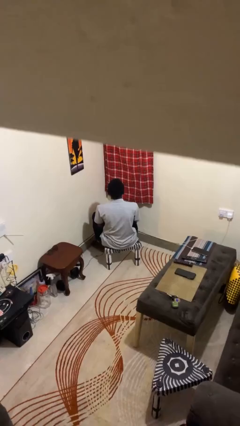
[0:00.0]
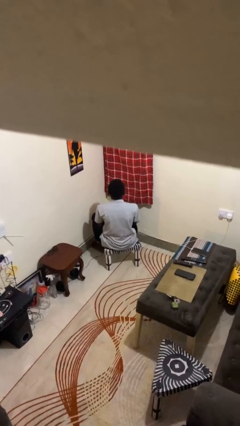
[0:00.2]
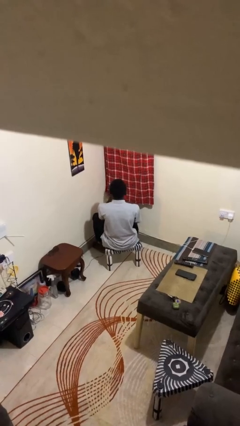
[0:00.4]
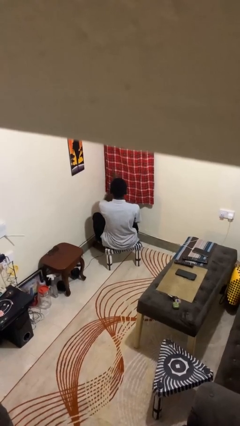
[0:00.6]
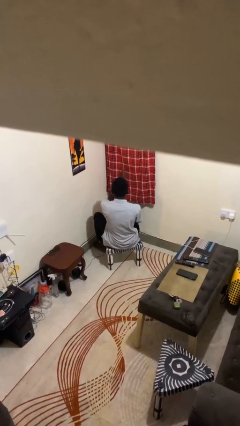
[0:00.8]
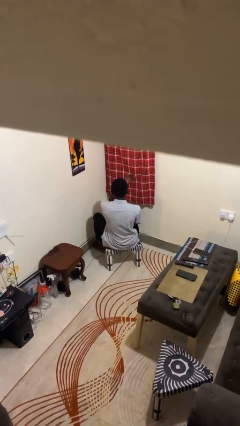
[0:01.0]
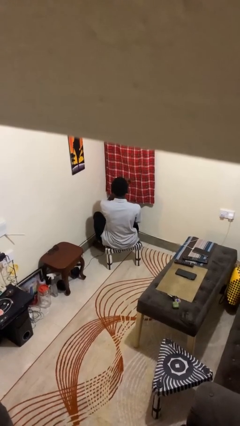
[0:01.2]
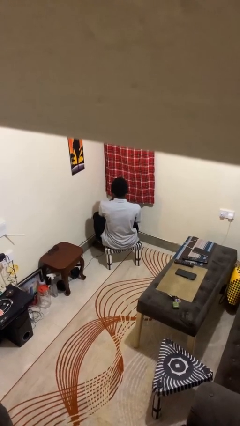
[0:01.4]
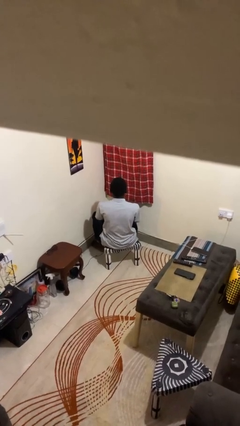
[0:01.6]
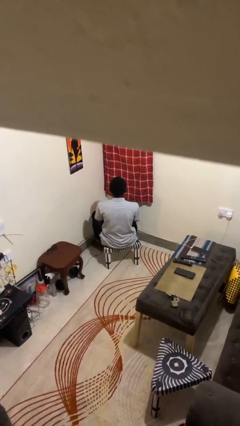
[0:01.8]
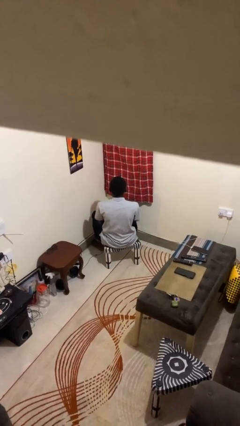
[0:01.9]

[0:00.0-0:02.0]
person gestures swipe right

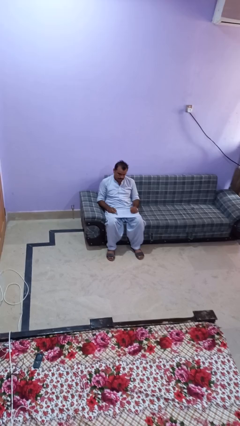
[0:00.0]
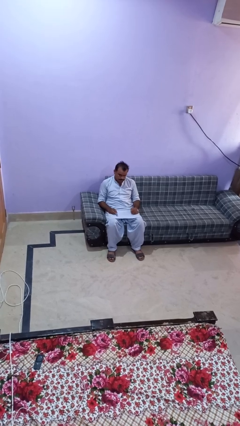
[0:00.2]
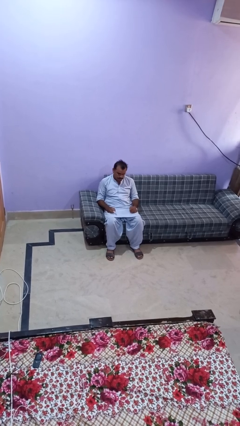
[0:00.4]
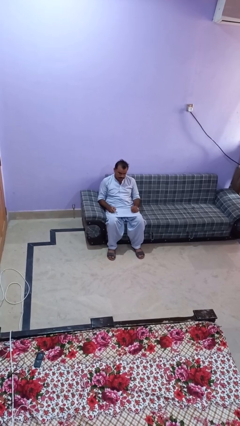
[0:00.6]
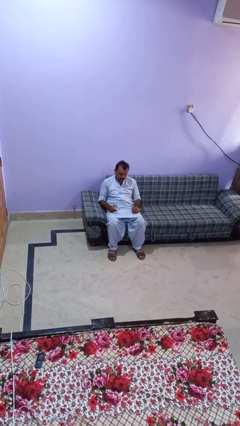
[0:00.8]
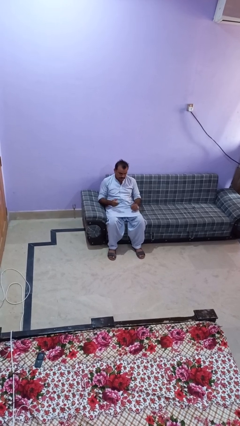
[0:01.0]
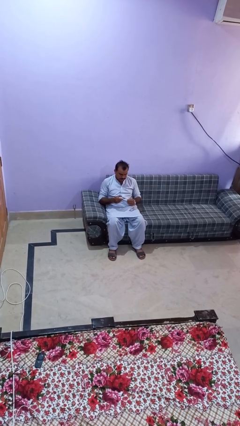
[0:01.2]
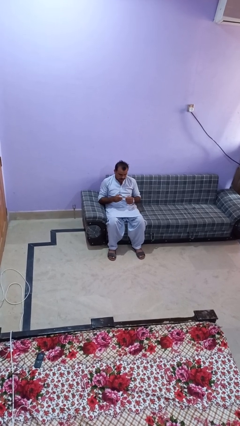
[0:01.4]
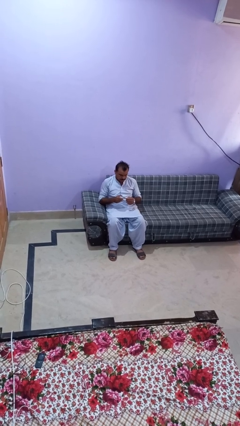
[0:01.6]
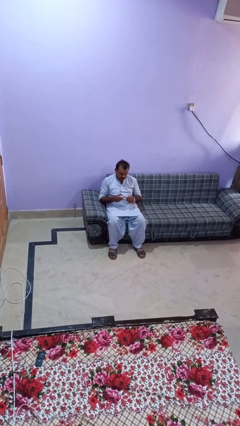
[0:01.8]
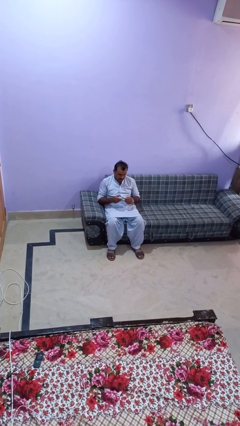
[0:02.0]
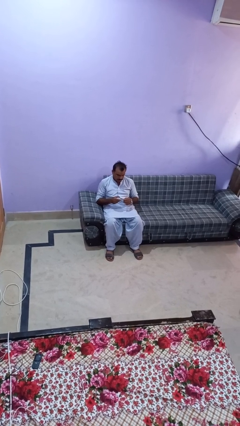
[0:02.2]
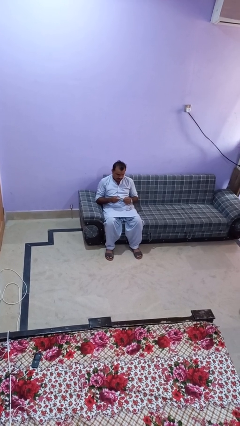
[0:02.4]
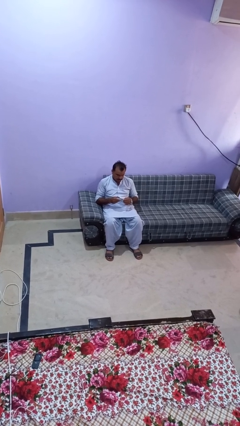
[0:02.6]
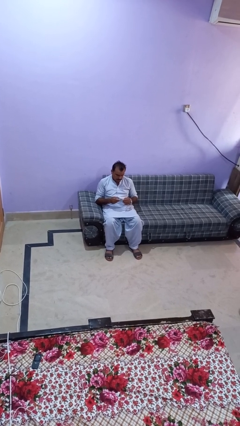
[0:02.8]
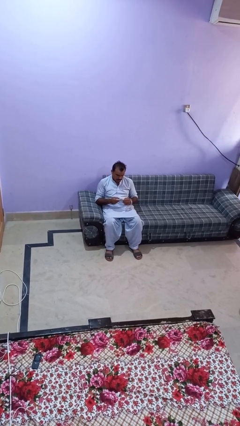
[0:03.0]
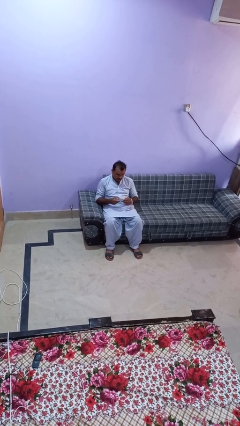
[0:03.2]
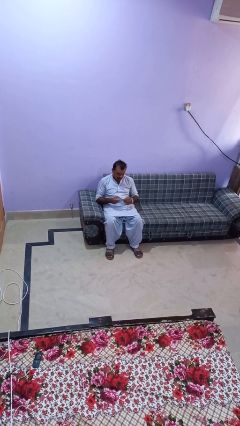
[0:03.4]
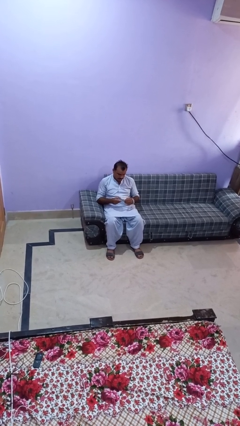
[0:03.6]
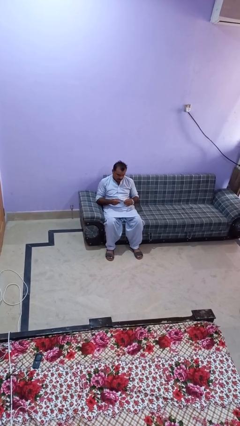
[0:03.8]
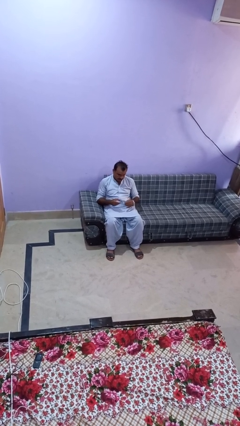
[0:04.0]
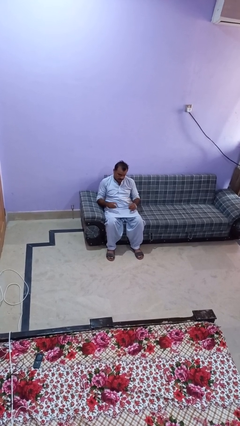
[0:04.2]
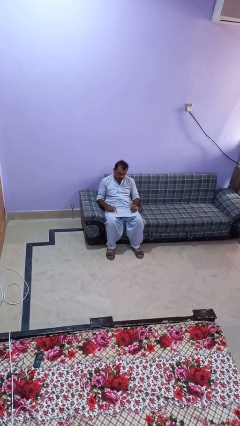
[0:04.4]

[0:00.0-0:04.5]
person clips fingernails

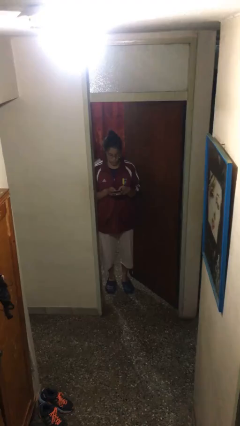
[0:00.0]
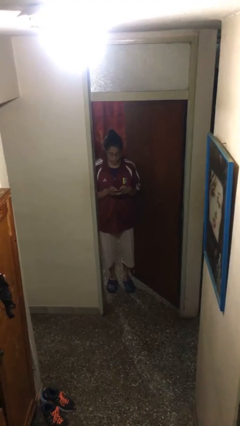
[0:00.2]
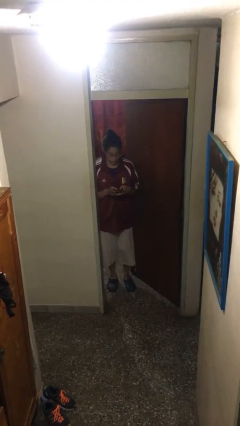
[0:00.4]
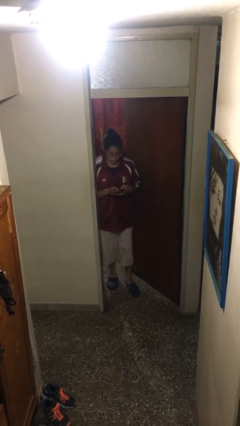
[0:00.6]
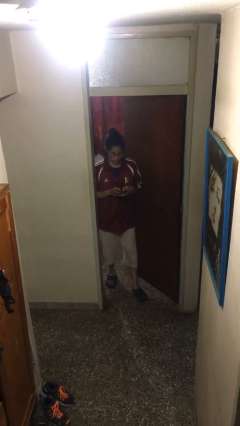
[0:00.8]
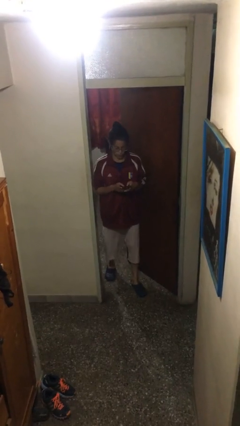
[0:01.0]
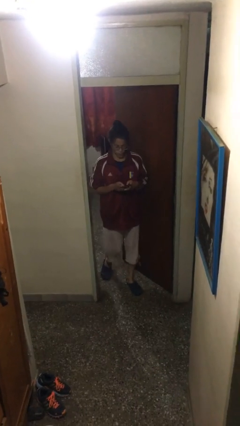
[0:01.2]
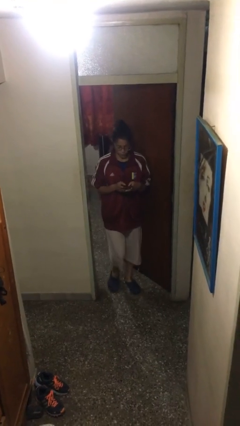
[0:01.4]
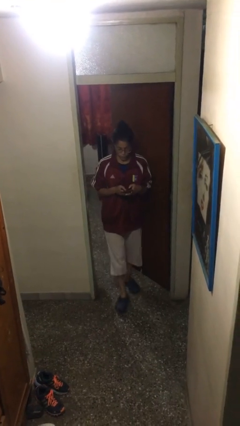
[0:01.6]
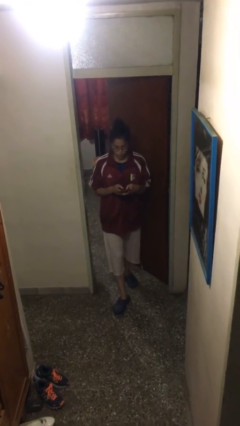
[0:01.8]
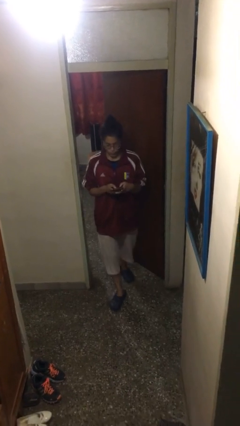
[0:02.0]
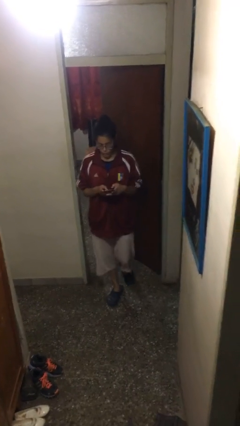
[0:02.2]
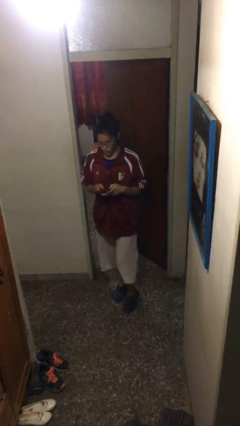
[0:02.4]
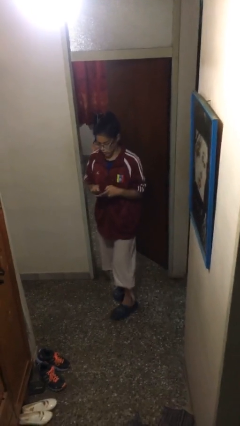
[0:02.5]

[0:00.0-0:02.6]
person enters scene through structure

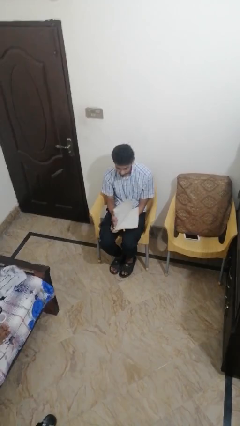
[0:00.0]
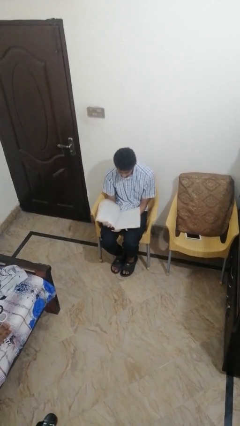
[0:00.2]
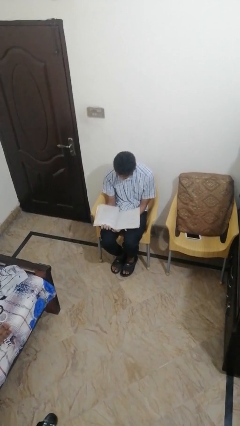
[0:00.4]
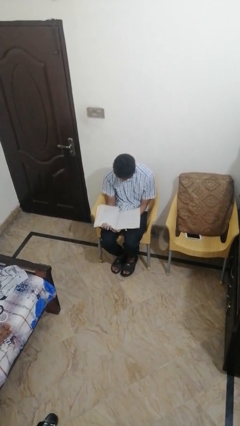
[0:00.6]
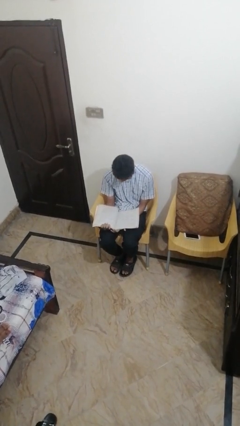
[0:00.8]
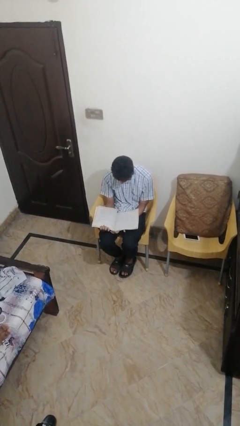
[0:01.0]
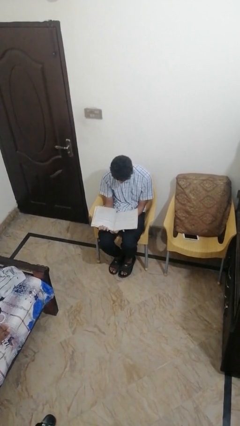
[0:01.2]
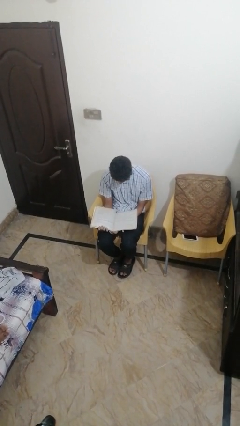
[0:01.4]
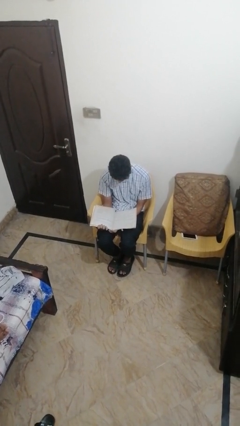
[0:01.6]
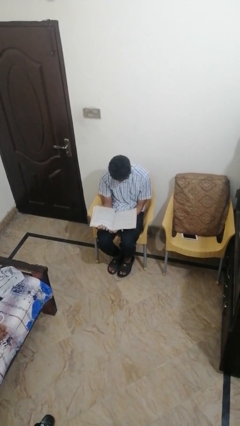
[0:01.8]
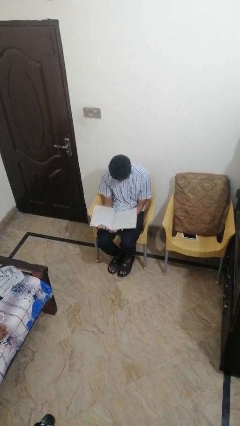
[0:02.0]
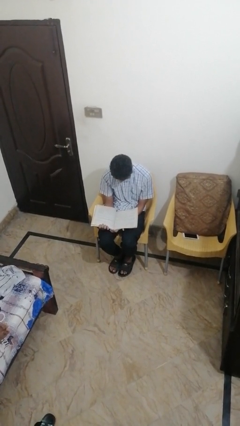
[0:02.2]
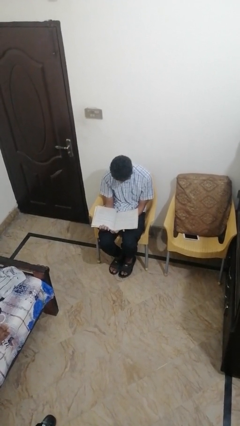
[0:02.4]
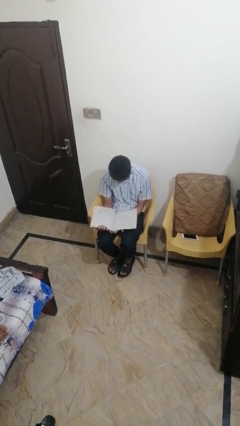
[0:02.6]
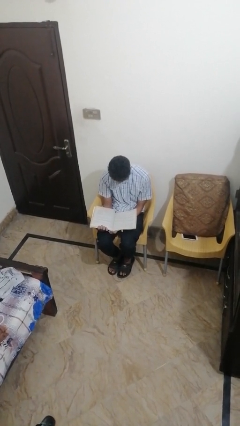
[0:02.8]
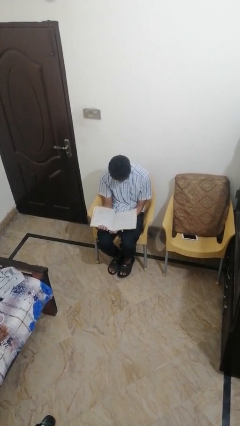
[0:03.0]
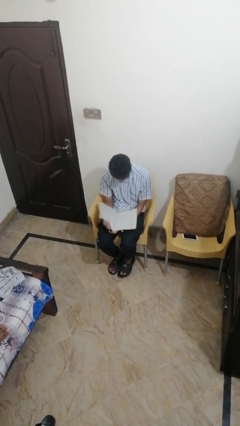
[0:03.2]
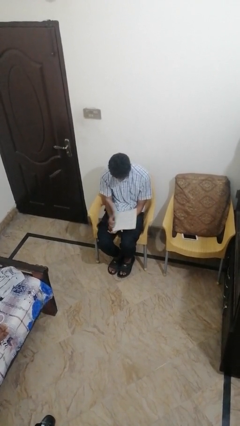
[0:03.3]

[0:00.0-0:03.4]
person reads magazine

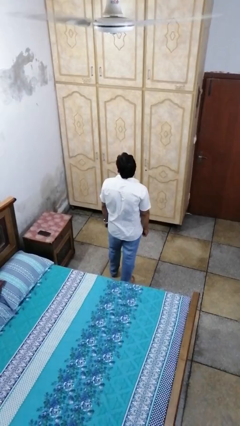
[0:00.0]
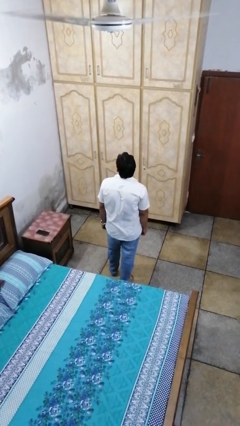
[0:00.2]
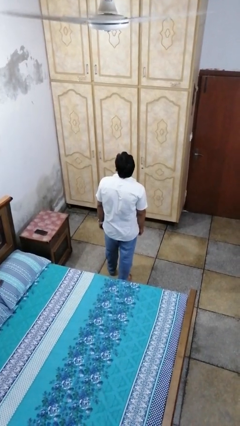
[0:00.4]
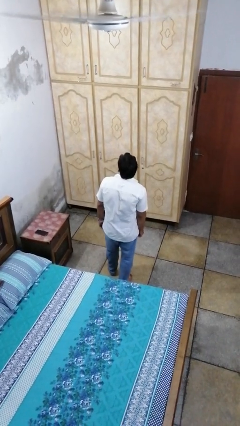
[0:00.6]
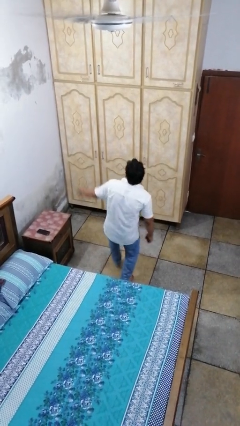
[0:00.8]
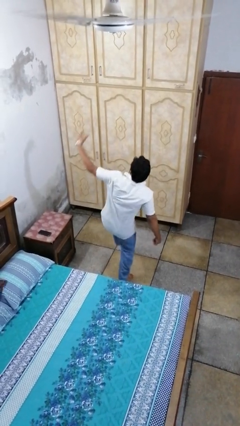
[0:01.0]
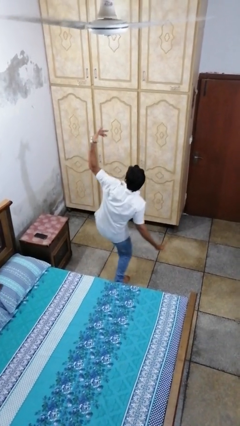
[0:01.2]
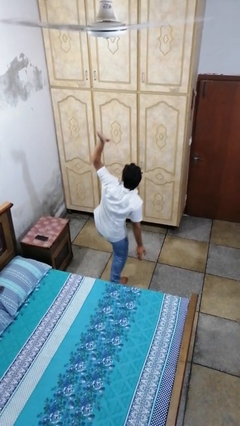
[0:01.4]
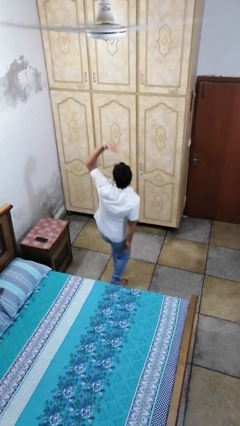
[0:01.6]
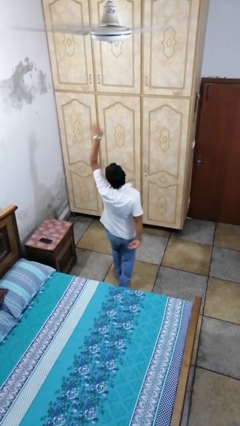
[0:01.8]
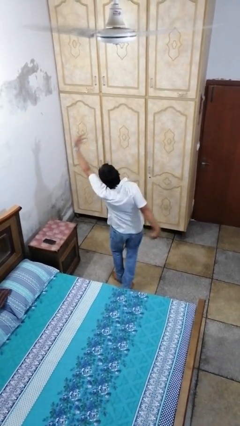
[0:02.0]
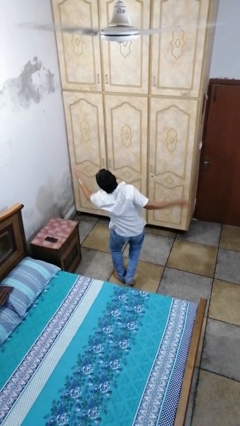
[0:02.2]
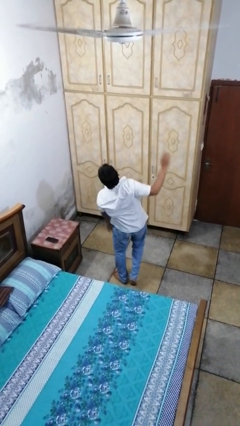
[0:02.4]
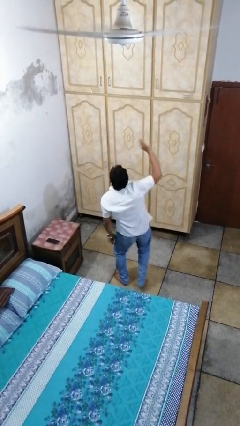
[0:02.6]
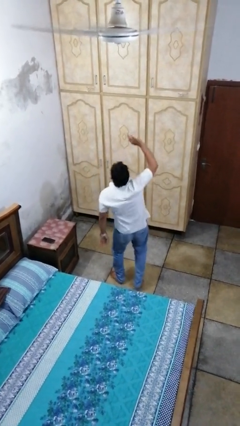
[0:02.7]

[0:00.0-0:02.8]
person dances in place

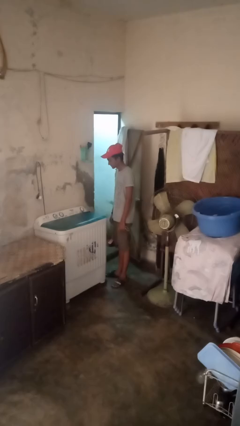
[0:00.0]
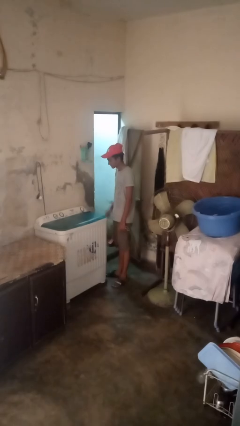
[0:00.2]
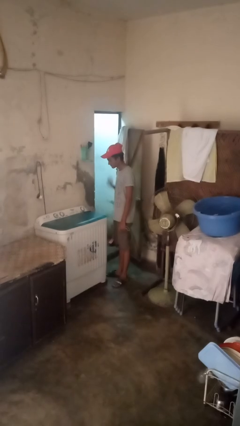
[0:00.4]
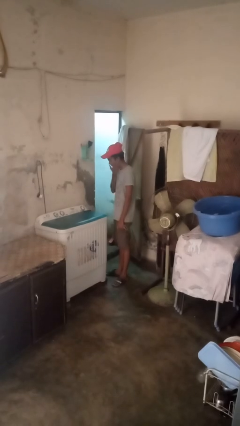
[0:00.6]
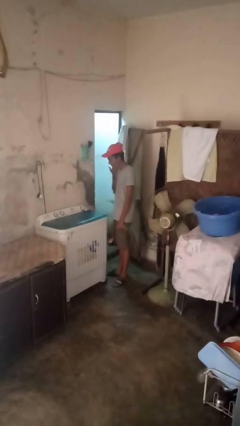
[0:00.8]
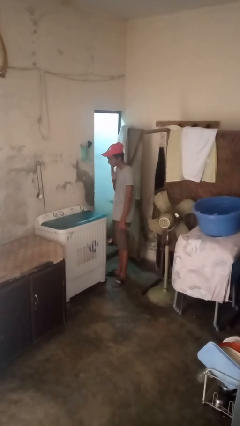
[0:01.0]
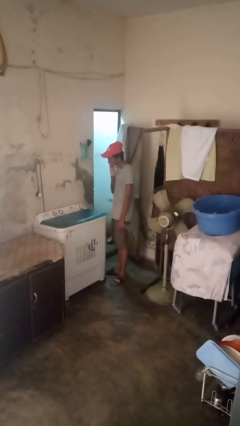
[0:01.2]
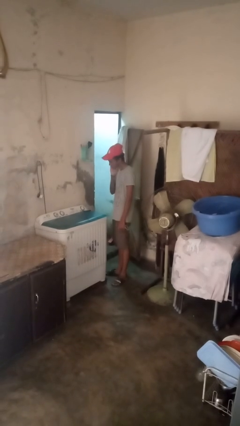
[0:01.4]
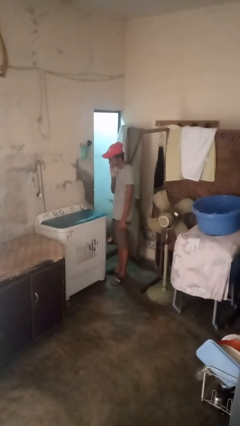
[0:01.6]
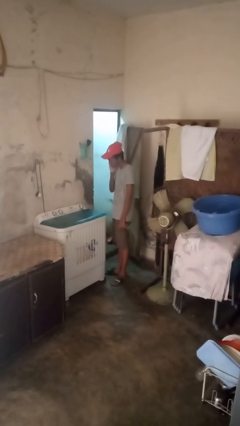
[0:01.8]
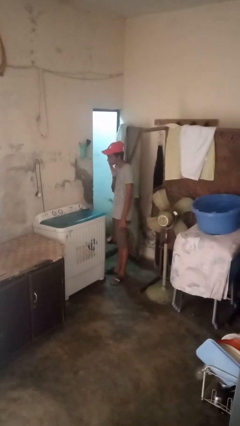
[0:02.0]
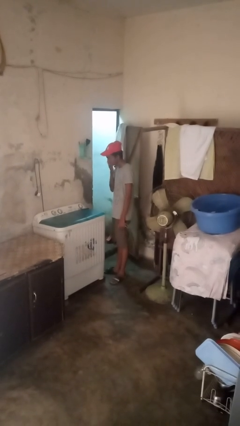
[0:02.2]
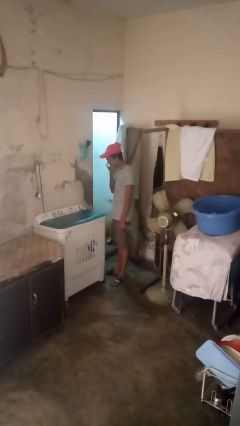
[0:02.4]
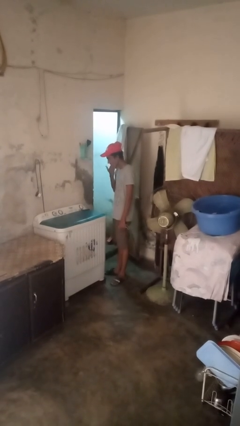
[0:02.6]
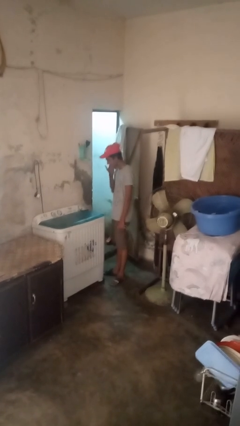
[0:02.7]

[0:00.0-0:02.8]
person applies shaving cream
